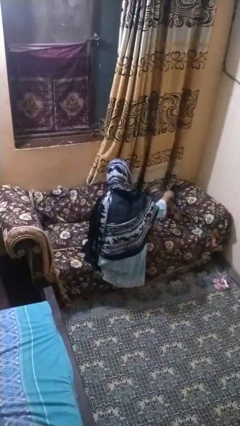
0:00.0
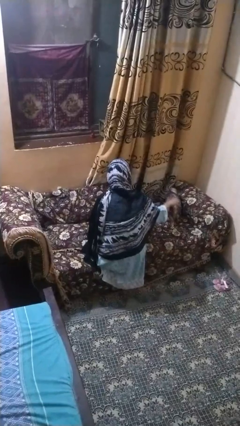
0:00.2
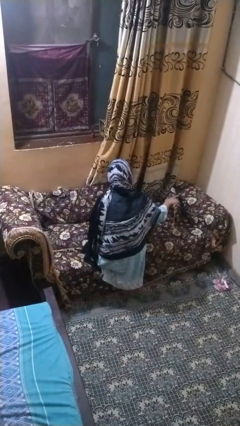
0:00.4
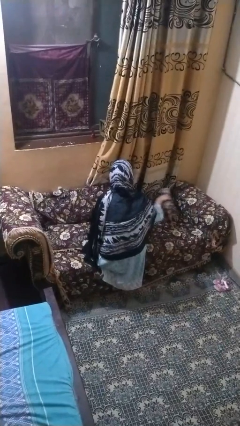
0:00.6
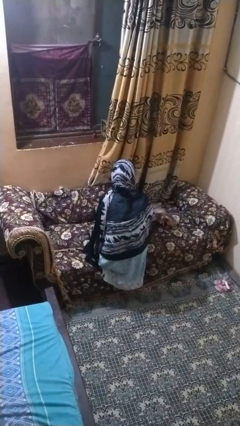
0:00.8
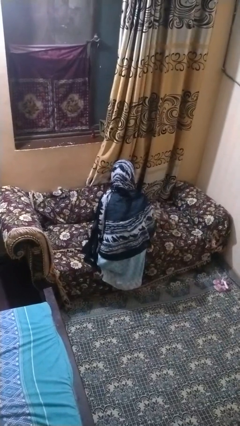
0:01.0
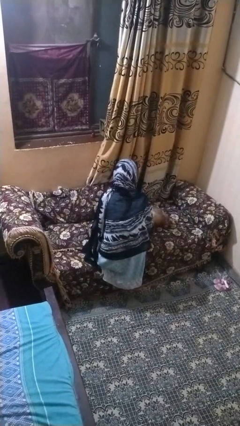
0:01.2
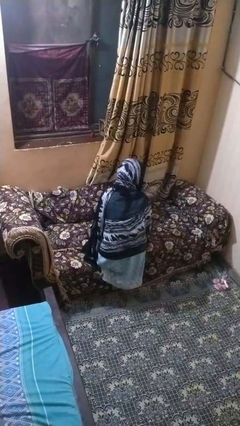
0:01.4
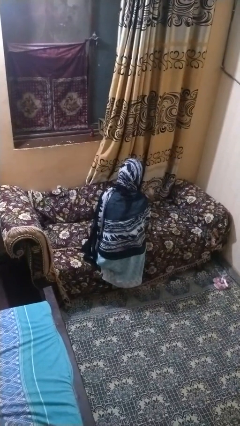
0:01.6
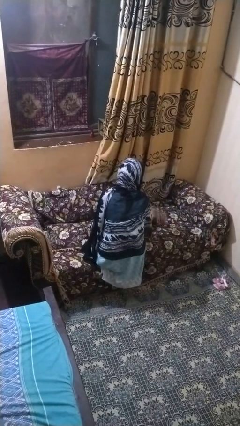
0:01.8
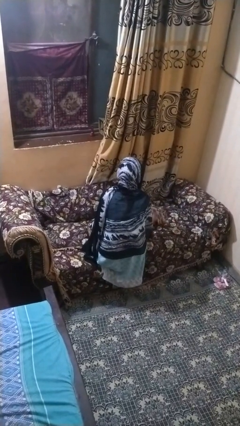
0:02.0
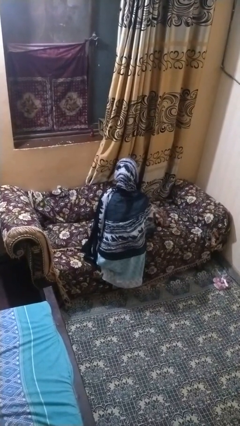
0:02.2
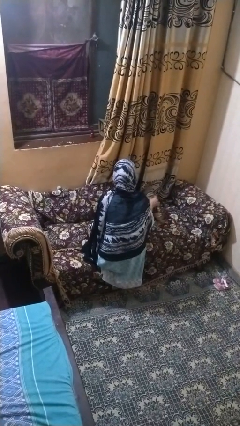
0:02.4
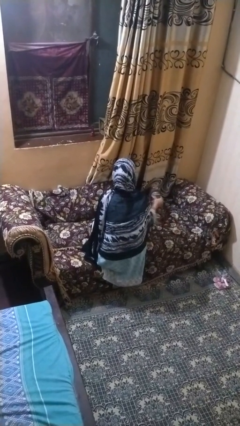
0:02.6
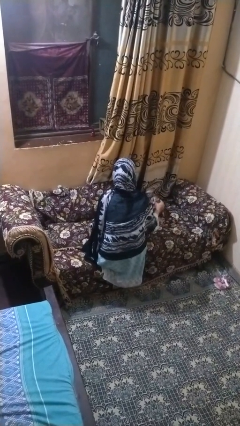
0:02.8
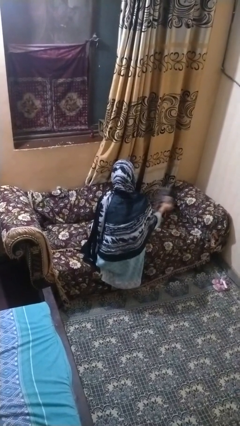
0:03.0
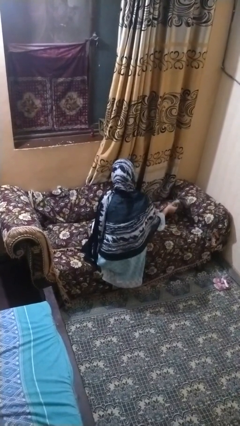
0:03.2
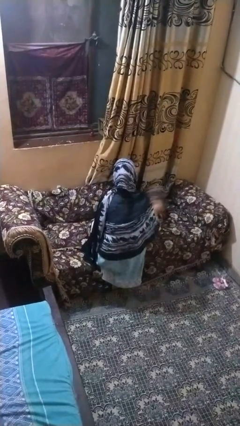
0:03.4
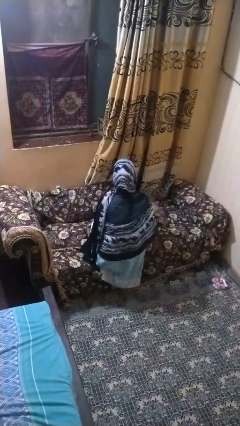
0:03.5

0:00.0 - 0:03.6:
person searches in couch

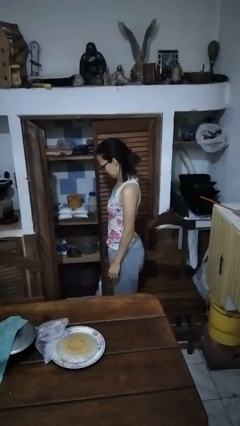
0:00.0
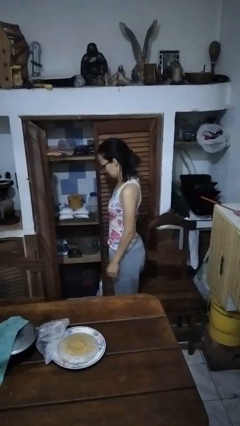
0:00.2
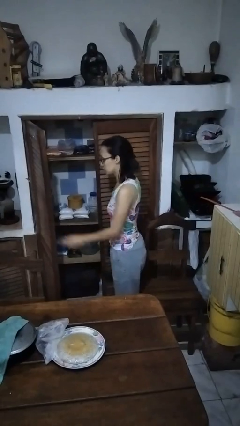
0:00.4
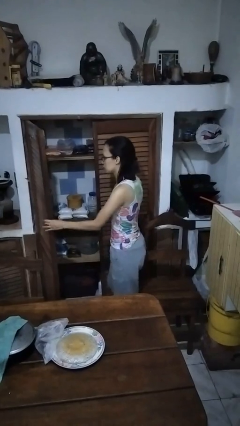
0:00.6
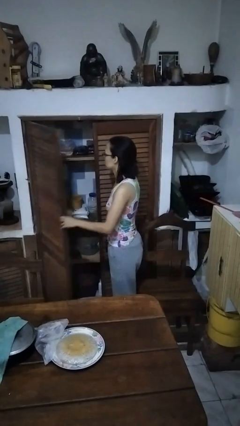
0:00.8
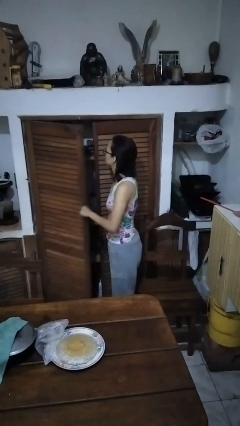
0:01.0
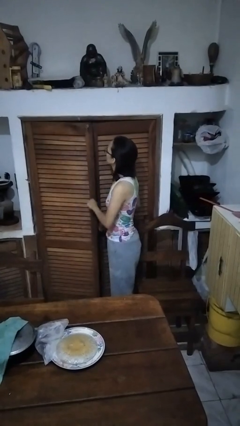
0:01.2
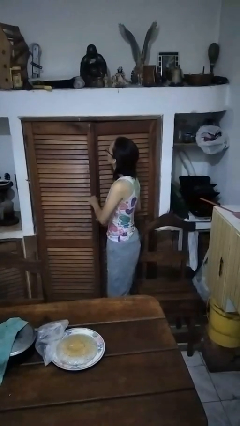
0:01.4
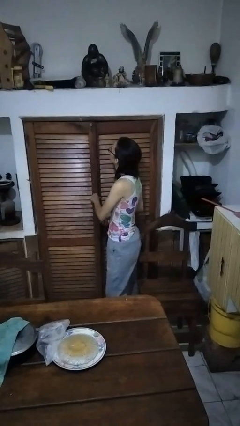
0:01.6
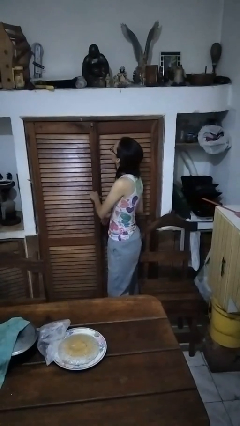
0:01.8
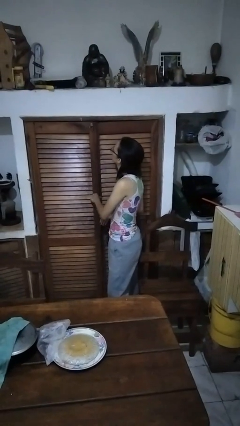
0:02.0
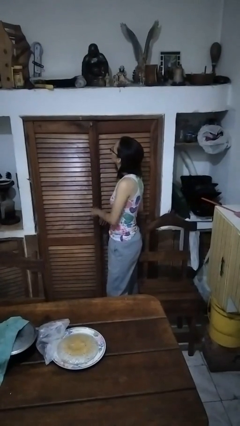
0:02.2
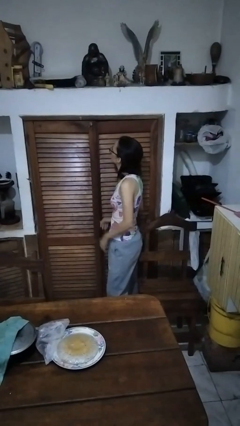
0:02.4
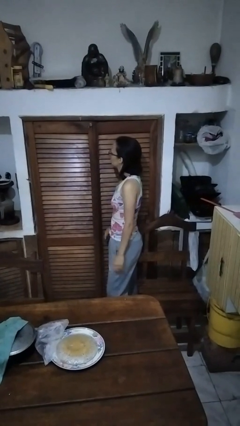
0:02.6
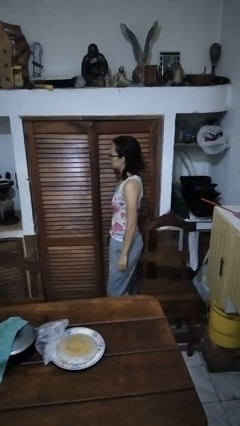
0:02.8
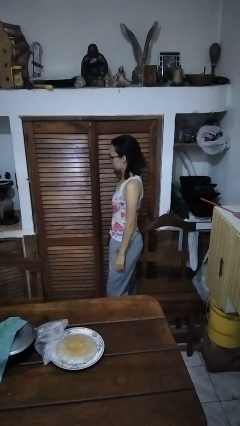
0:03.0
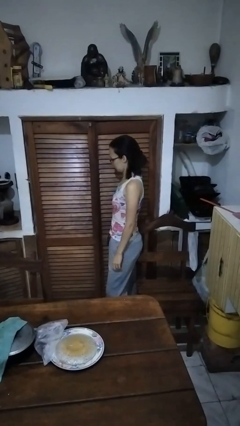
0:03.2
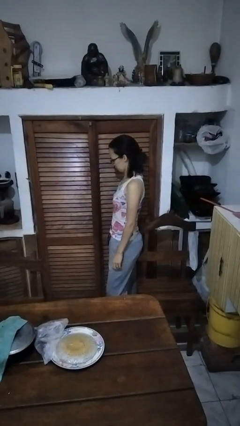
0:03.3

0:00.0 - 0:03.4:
person closes cabinet

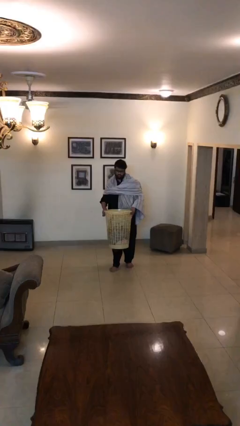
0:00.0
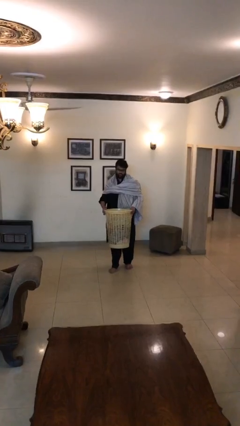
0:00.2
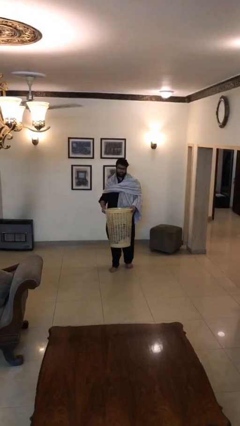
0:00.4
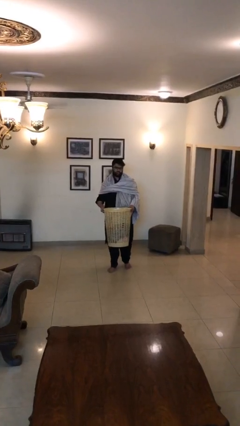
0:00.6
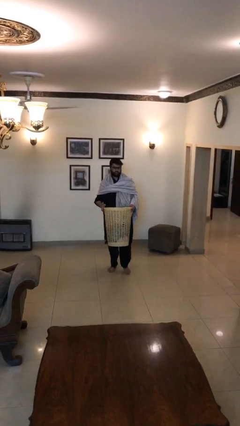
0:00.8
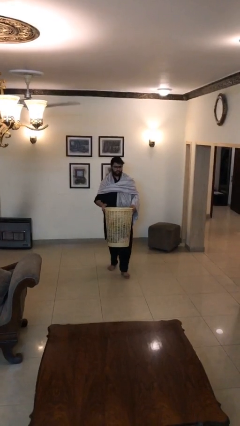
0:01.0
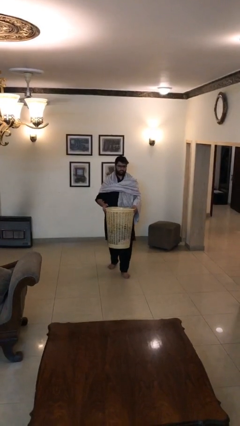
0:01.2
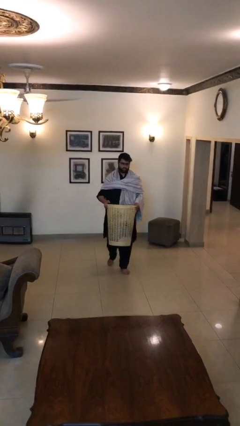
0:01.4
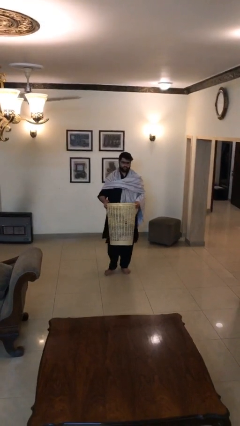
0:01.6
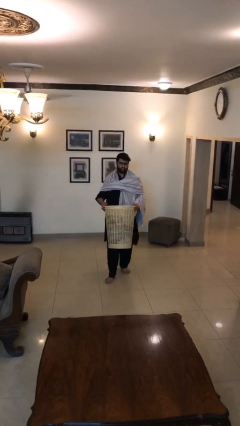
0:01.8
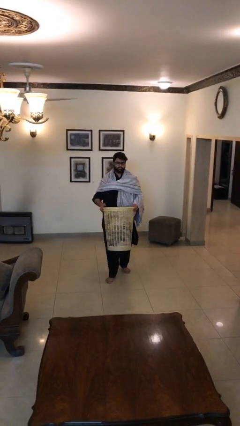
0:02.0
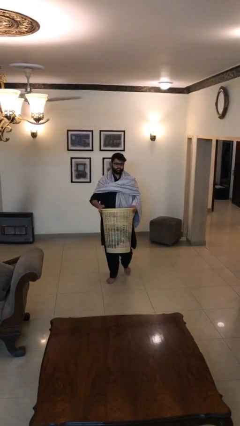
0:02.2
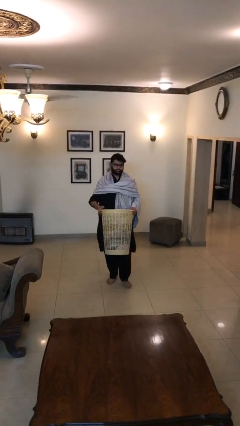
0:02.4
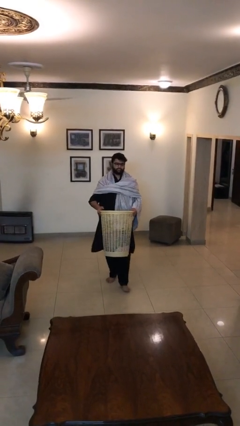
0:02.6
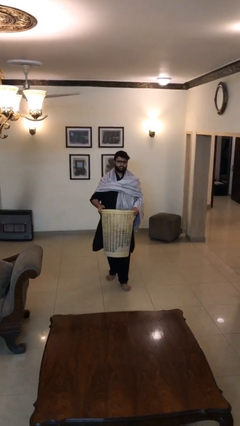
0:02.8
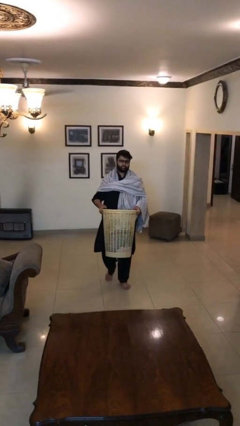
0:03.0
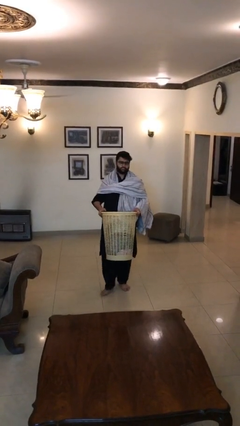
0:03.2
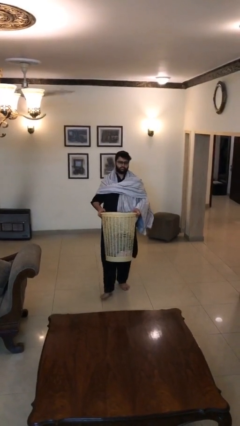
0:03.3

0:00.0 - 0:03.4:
person carries heavy object

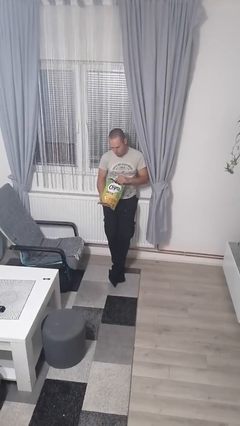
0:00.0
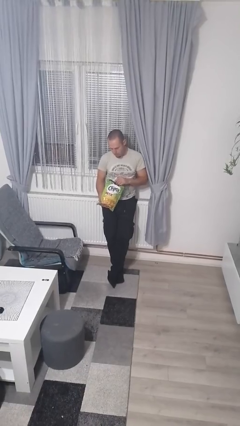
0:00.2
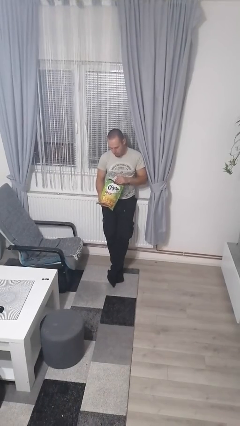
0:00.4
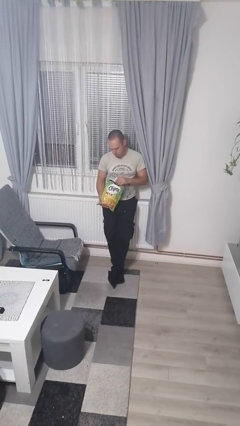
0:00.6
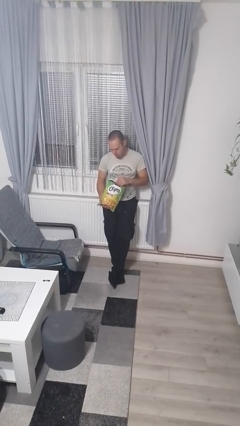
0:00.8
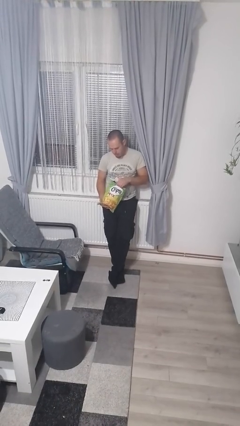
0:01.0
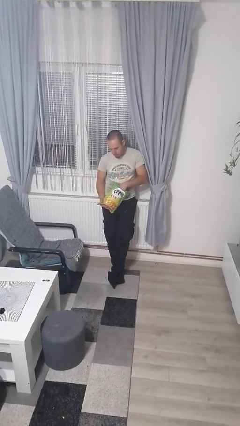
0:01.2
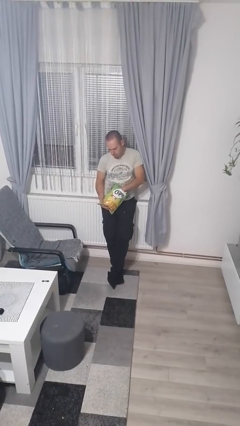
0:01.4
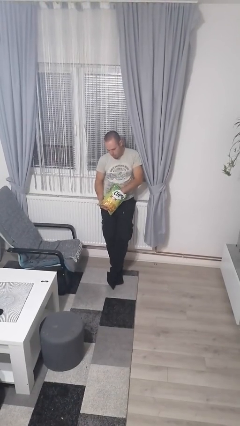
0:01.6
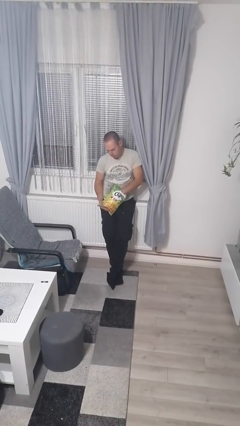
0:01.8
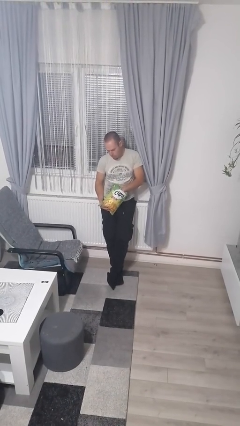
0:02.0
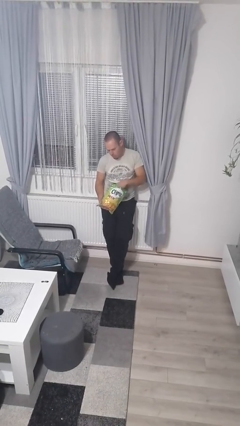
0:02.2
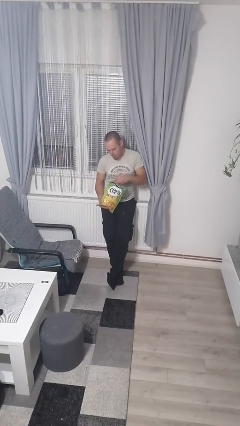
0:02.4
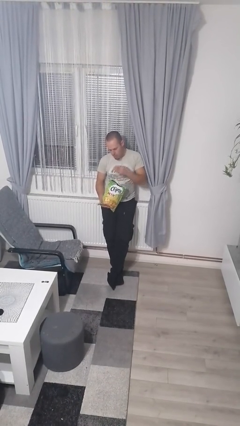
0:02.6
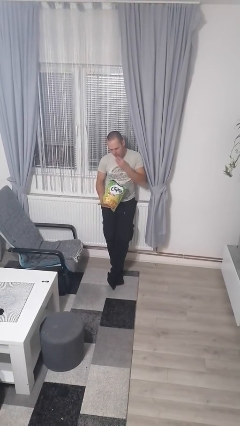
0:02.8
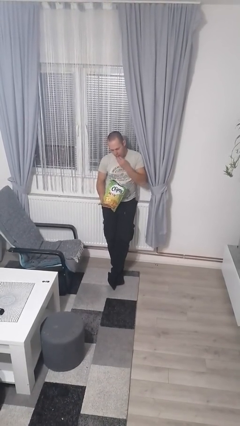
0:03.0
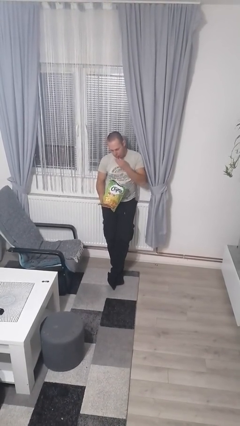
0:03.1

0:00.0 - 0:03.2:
person eats snack from bag

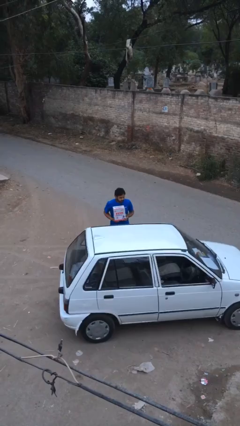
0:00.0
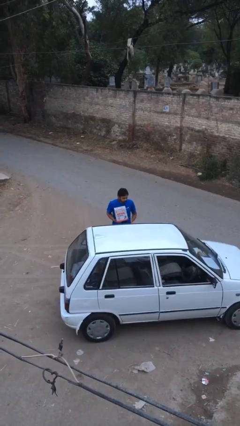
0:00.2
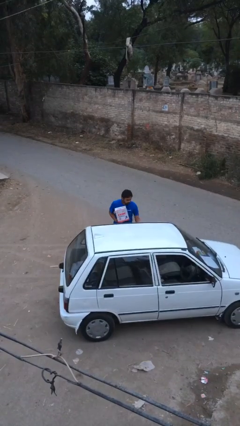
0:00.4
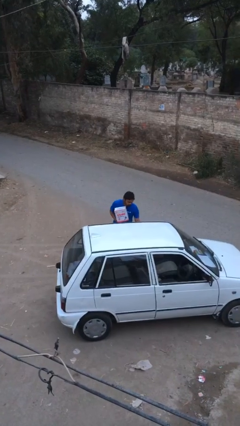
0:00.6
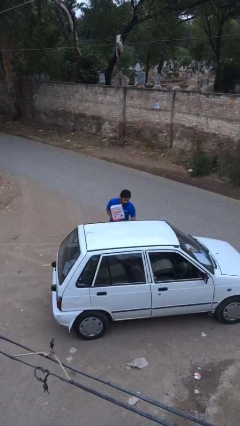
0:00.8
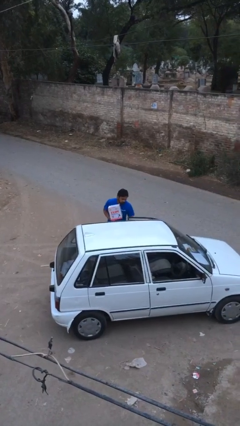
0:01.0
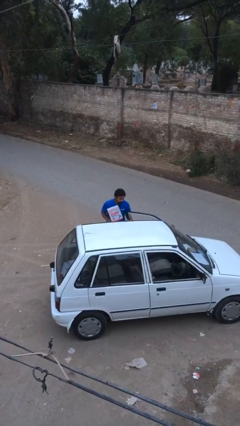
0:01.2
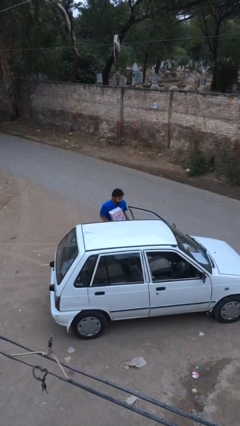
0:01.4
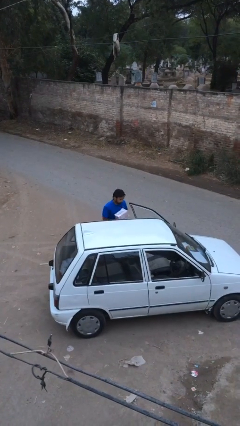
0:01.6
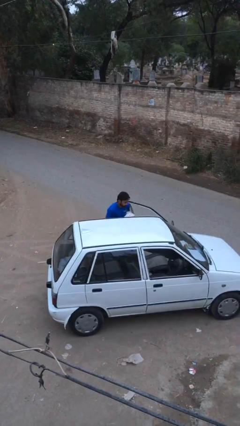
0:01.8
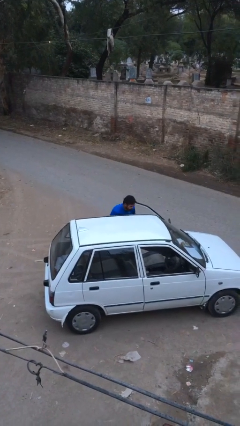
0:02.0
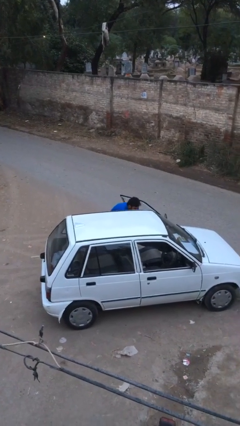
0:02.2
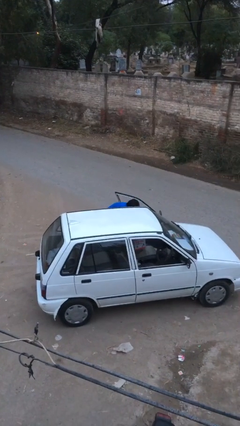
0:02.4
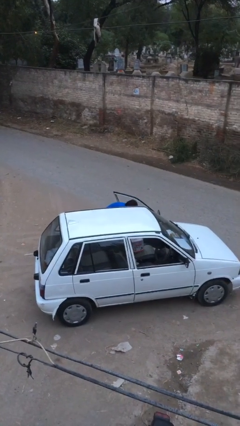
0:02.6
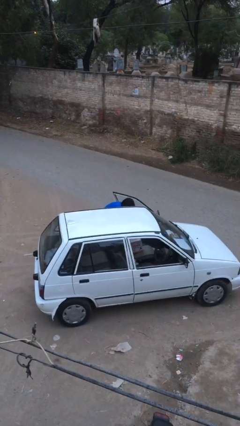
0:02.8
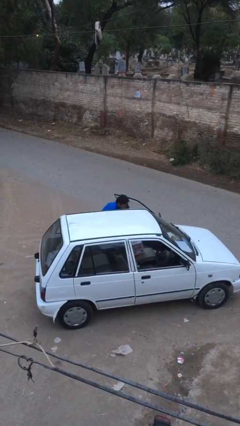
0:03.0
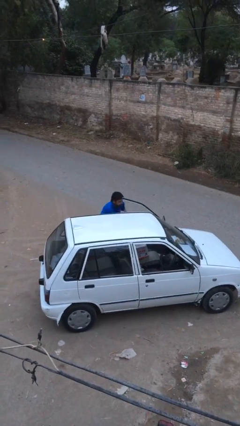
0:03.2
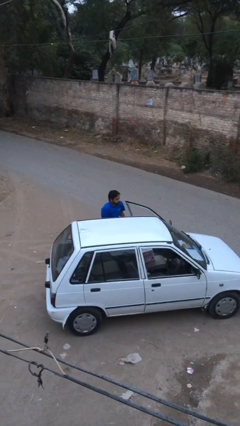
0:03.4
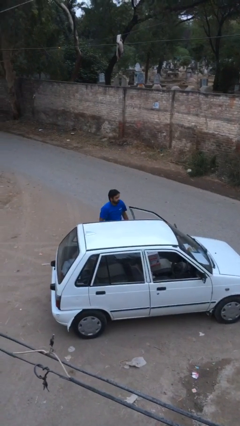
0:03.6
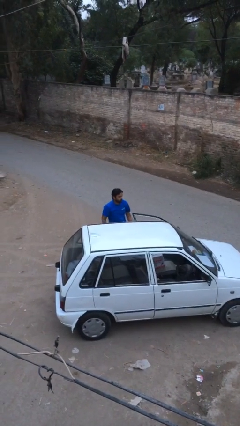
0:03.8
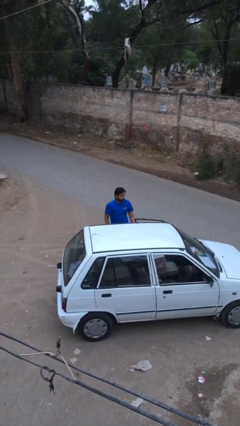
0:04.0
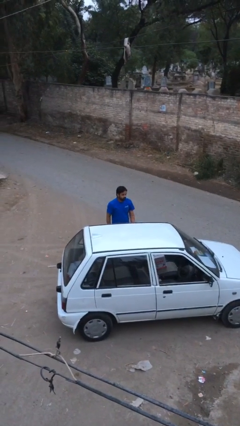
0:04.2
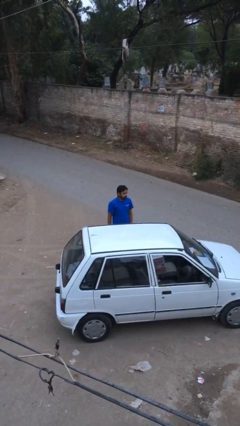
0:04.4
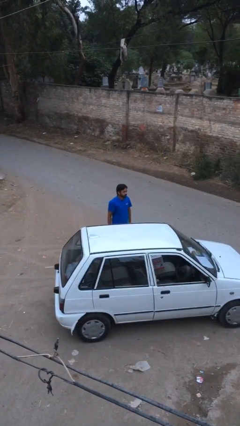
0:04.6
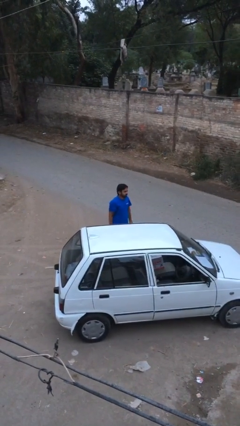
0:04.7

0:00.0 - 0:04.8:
person loads car
